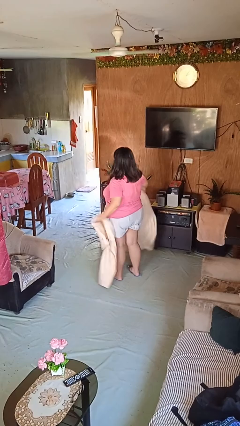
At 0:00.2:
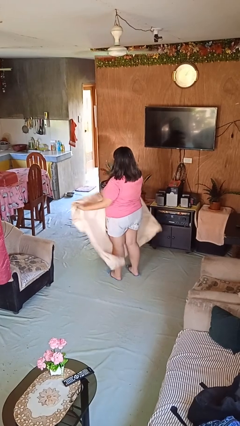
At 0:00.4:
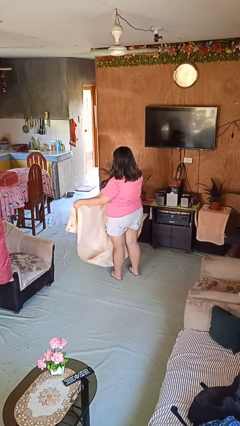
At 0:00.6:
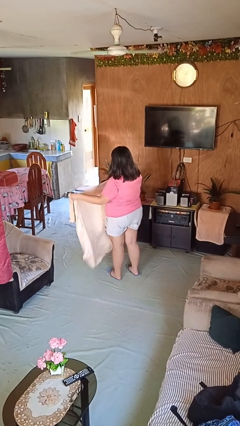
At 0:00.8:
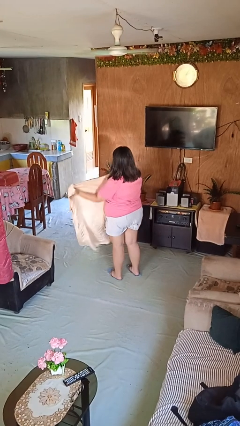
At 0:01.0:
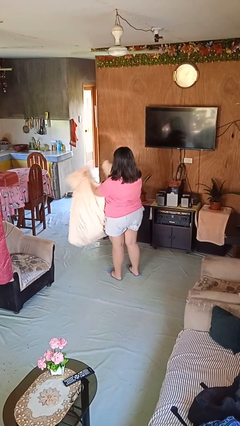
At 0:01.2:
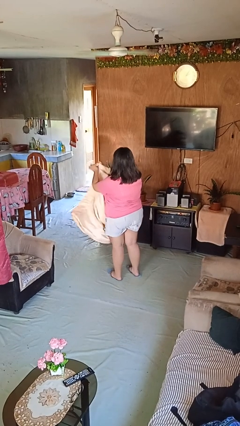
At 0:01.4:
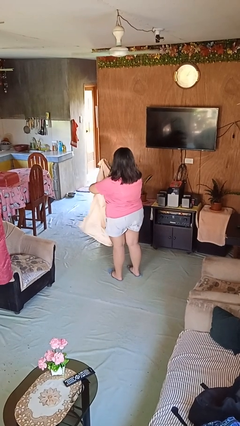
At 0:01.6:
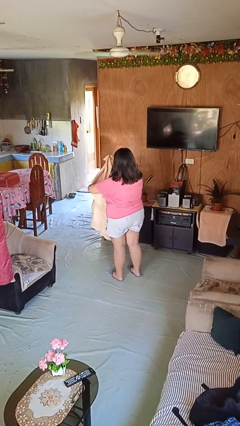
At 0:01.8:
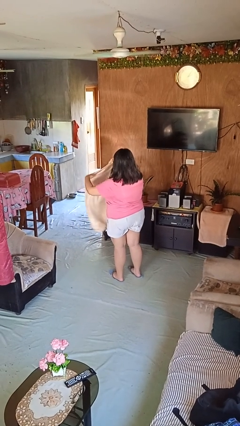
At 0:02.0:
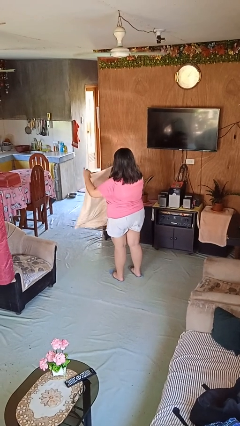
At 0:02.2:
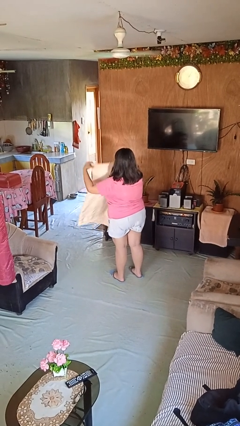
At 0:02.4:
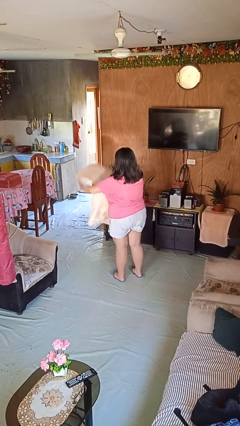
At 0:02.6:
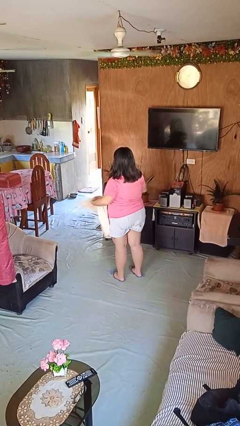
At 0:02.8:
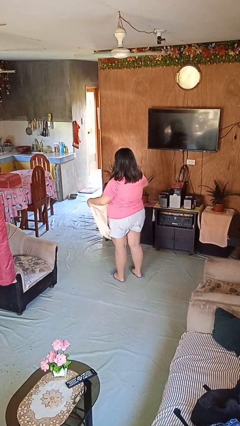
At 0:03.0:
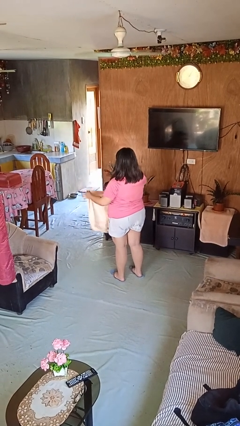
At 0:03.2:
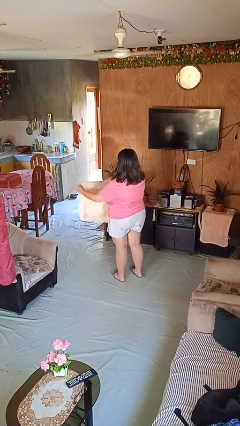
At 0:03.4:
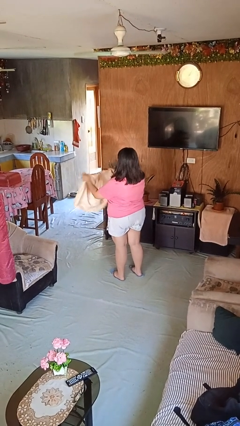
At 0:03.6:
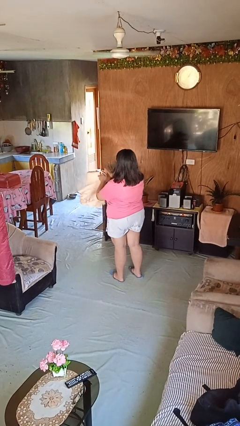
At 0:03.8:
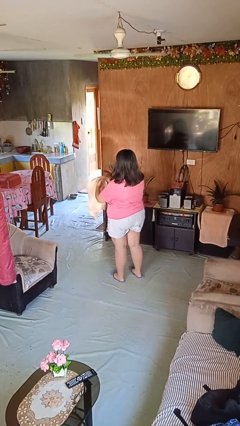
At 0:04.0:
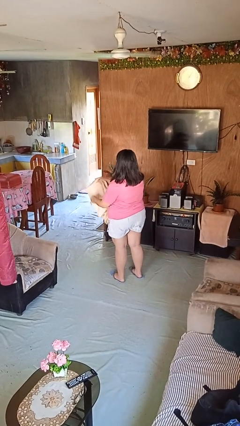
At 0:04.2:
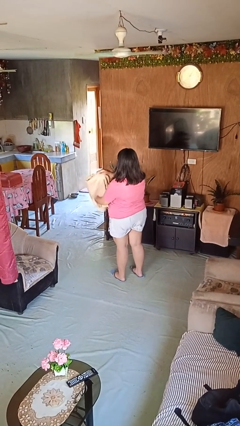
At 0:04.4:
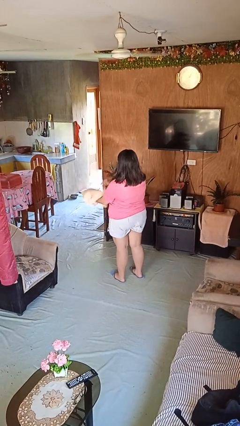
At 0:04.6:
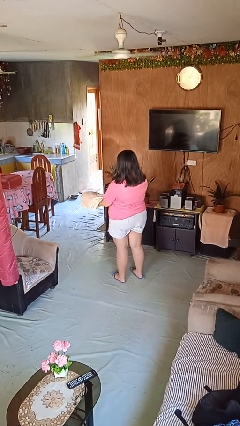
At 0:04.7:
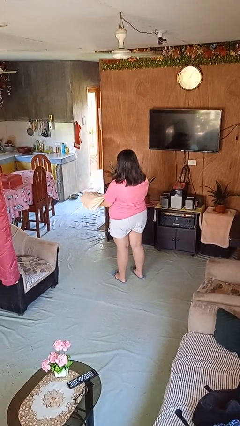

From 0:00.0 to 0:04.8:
person folds blanket

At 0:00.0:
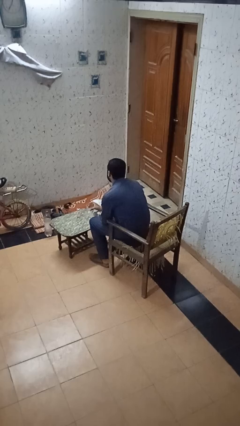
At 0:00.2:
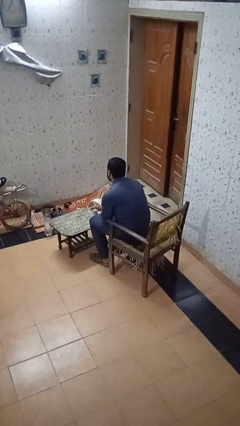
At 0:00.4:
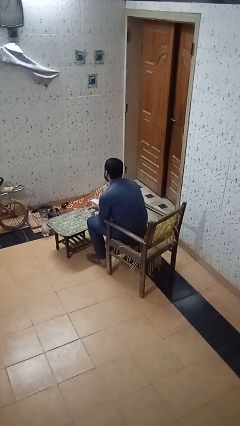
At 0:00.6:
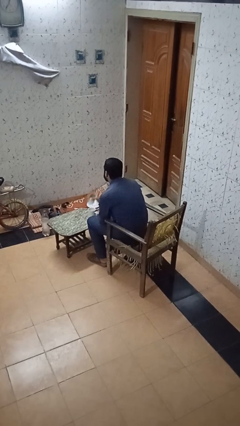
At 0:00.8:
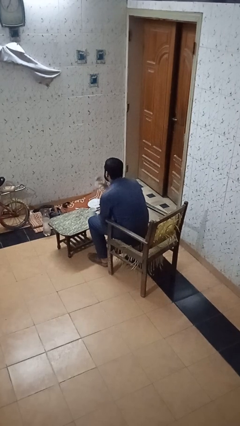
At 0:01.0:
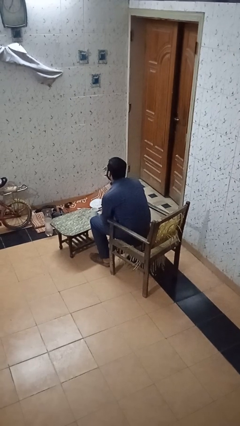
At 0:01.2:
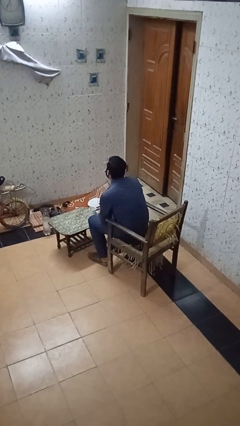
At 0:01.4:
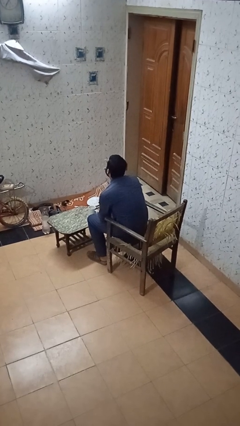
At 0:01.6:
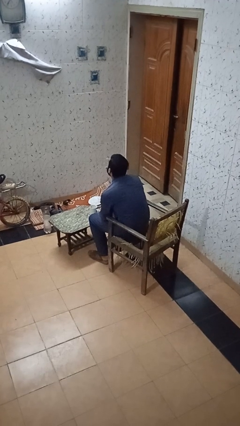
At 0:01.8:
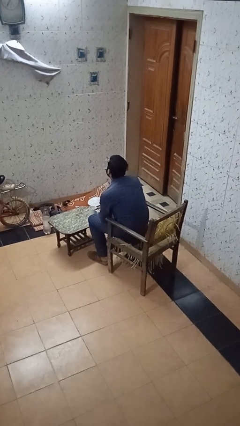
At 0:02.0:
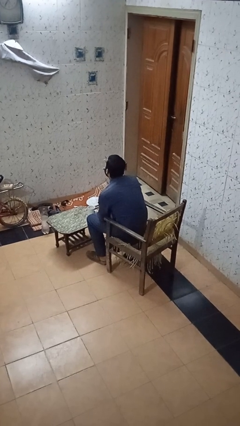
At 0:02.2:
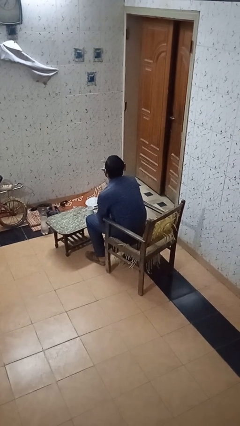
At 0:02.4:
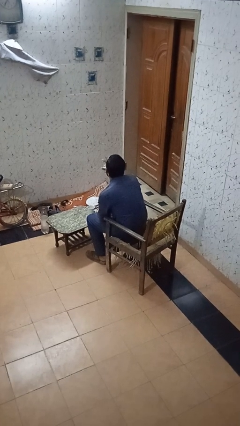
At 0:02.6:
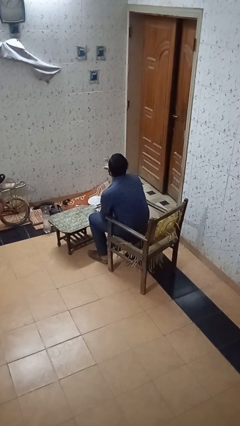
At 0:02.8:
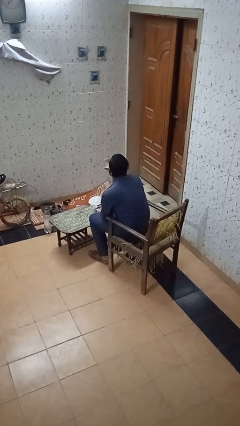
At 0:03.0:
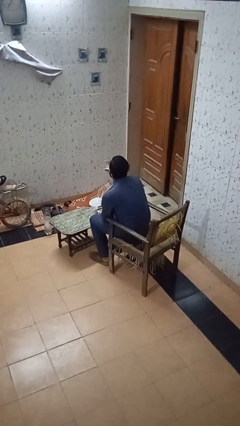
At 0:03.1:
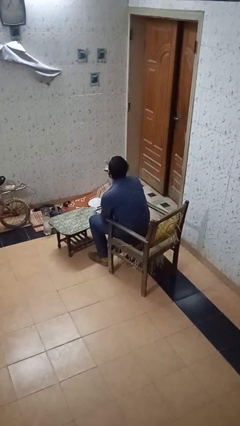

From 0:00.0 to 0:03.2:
person drinks from shotglass

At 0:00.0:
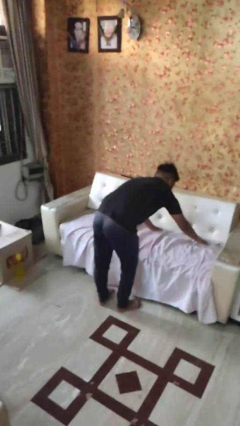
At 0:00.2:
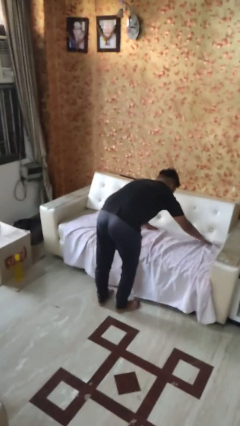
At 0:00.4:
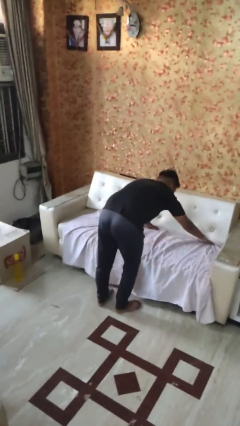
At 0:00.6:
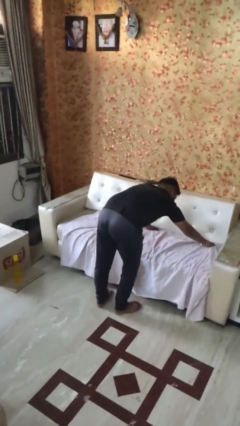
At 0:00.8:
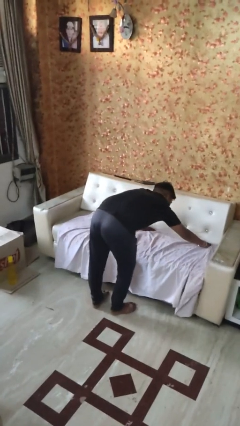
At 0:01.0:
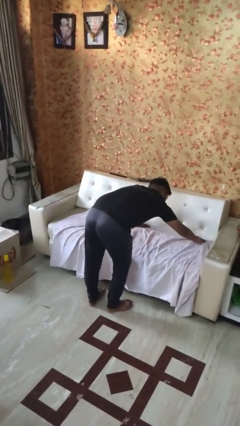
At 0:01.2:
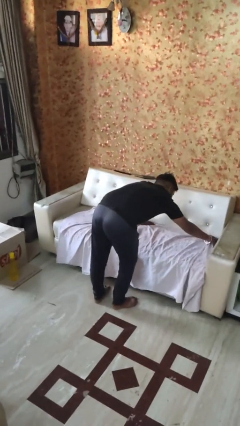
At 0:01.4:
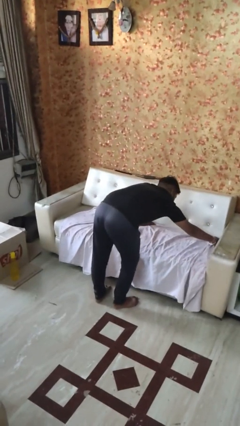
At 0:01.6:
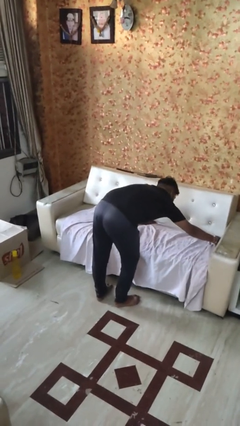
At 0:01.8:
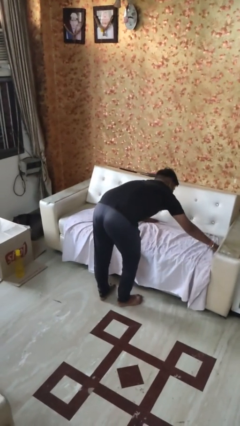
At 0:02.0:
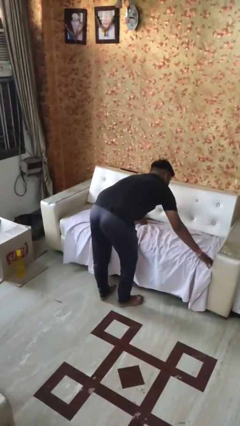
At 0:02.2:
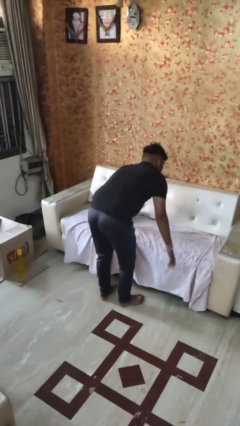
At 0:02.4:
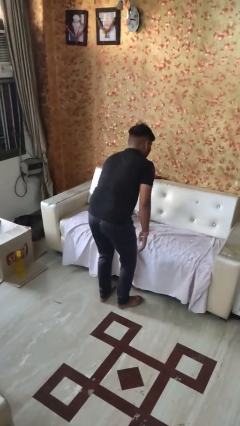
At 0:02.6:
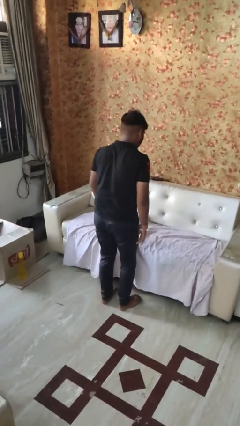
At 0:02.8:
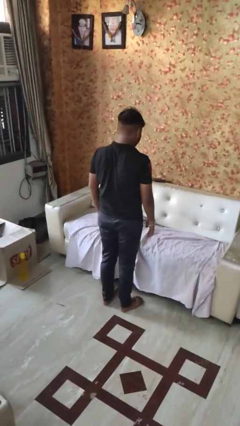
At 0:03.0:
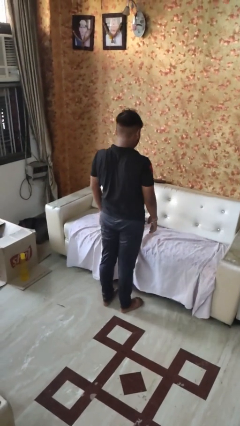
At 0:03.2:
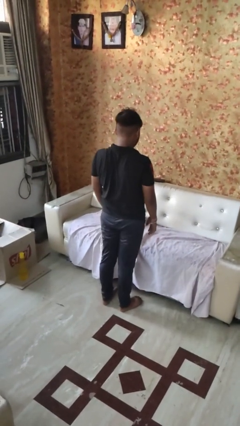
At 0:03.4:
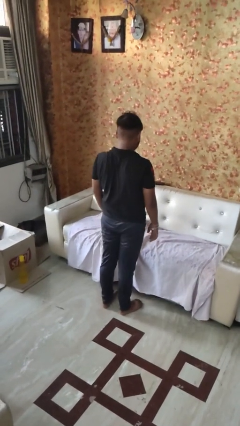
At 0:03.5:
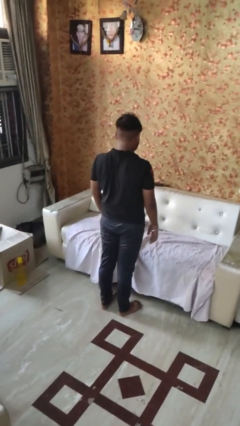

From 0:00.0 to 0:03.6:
person makes bed

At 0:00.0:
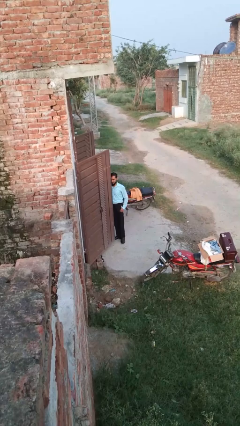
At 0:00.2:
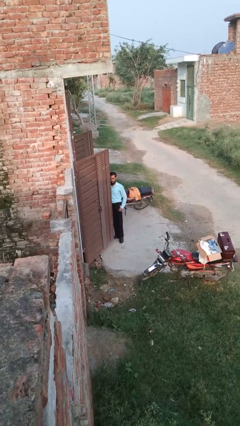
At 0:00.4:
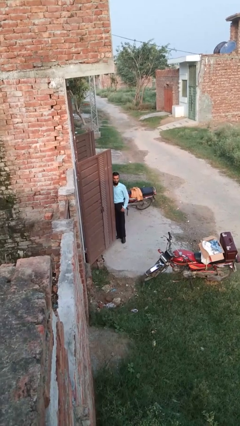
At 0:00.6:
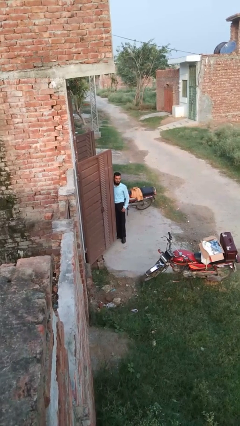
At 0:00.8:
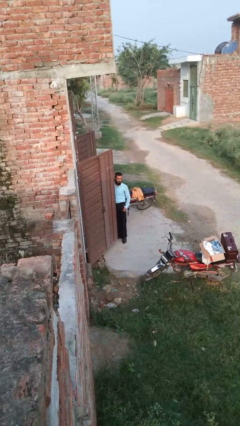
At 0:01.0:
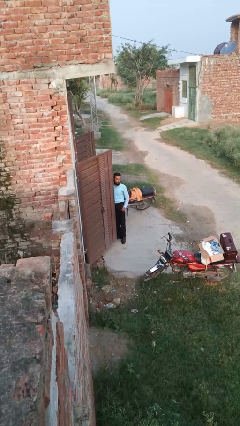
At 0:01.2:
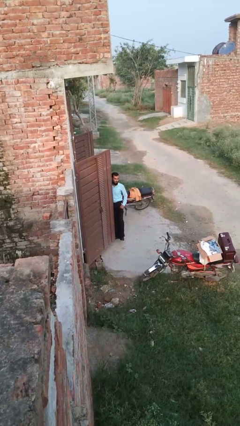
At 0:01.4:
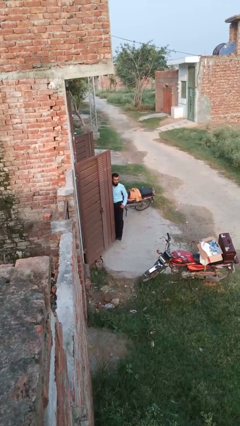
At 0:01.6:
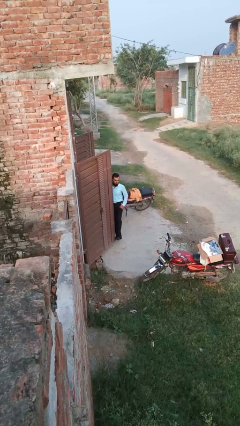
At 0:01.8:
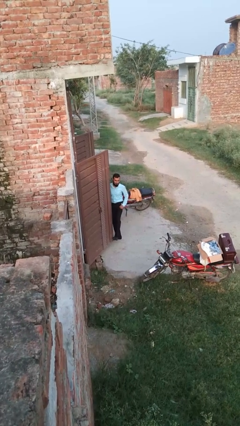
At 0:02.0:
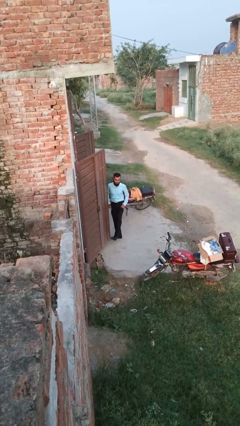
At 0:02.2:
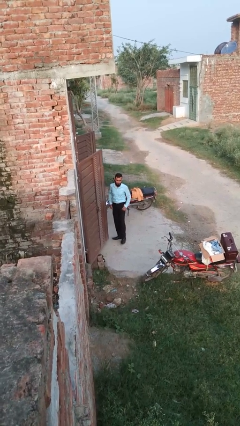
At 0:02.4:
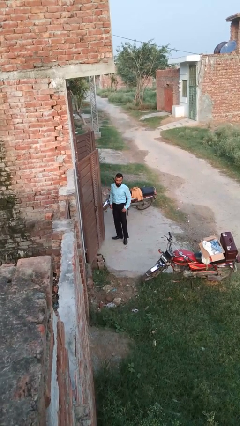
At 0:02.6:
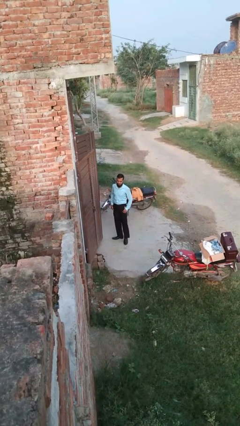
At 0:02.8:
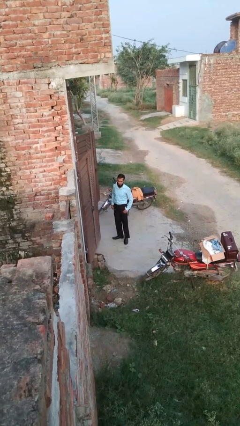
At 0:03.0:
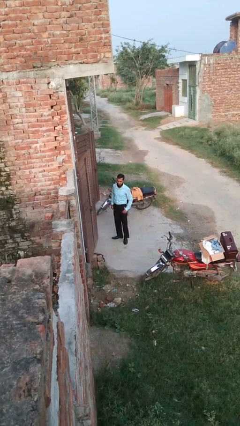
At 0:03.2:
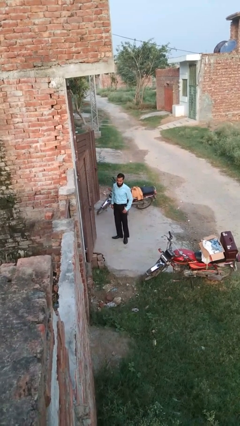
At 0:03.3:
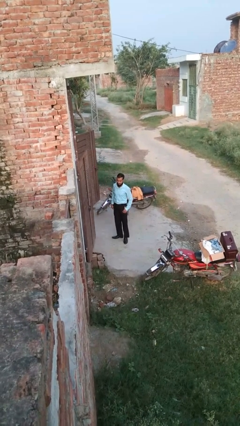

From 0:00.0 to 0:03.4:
person closes door with foot

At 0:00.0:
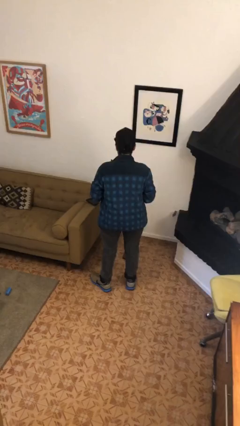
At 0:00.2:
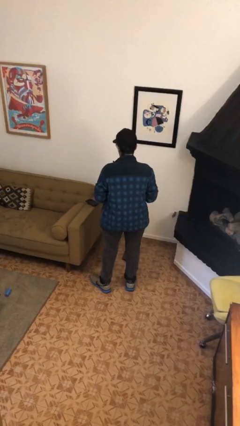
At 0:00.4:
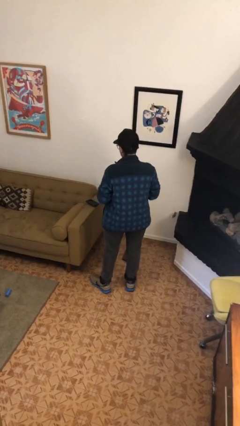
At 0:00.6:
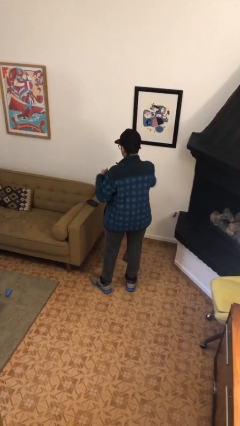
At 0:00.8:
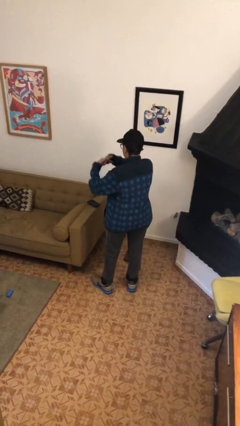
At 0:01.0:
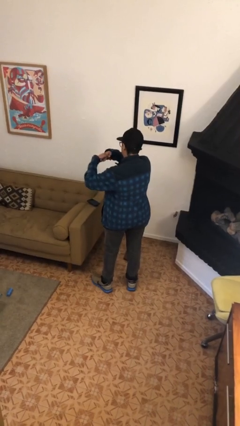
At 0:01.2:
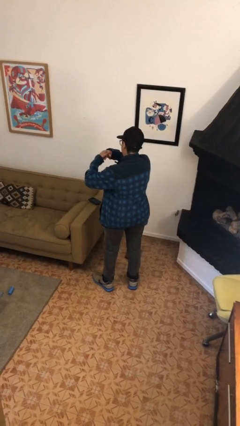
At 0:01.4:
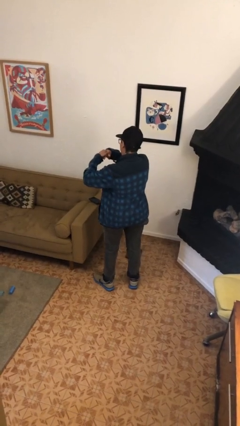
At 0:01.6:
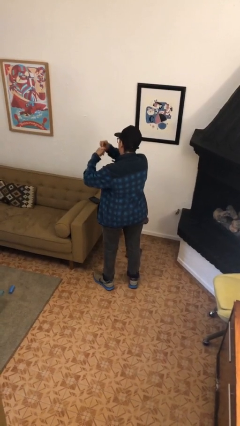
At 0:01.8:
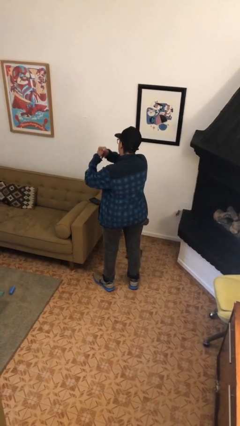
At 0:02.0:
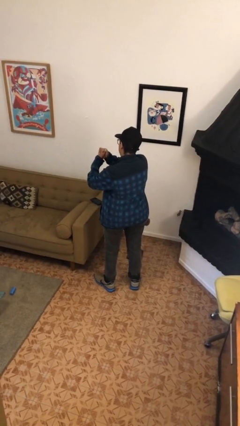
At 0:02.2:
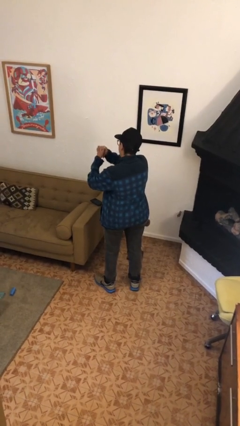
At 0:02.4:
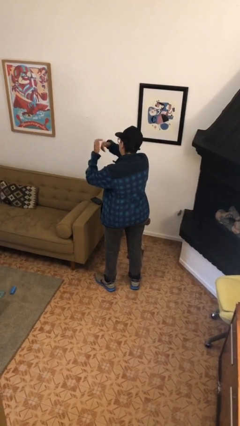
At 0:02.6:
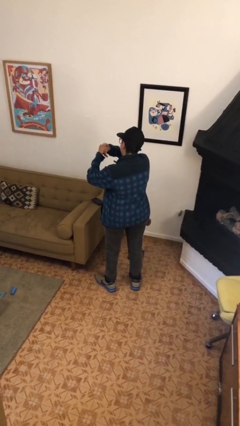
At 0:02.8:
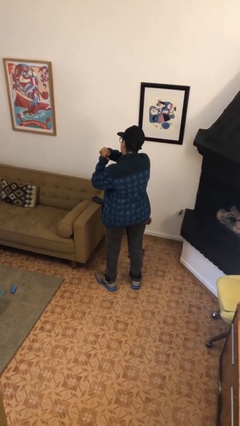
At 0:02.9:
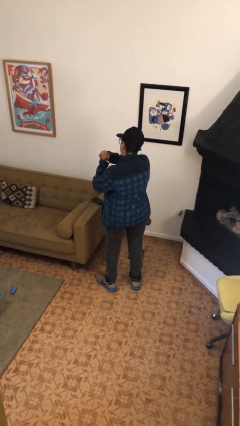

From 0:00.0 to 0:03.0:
person cracks knuckles
